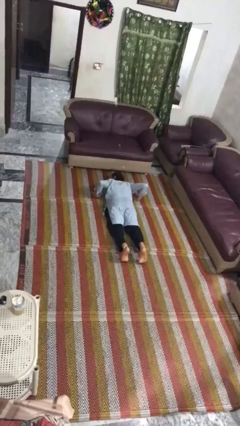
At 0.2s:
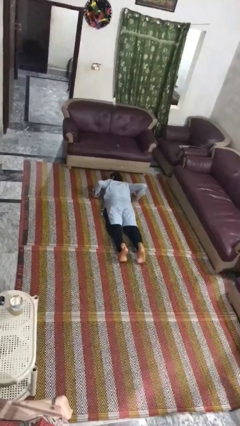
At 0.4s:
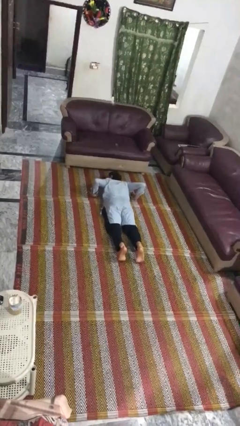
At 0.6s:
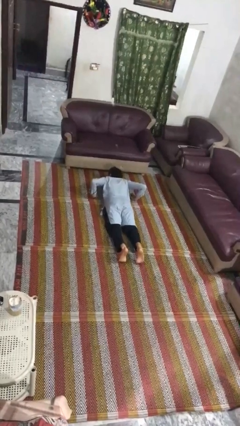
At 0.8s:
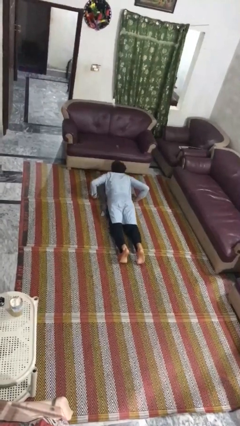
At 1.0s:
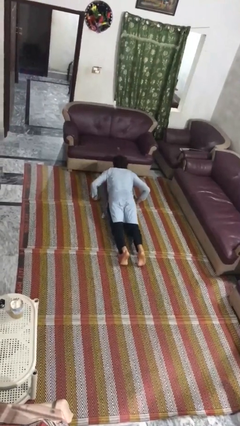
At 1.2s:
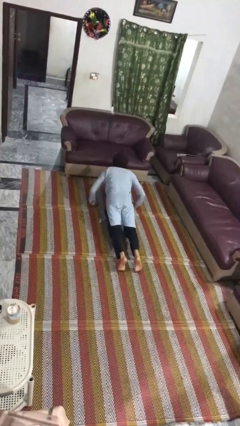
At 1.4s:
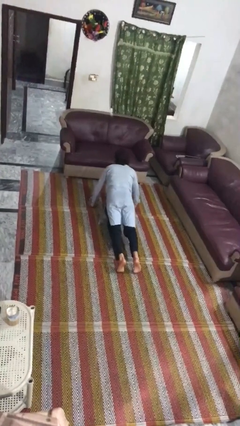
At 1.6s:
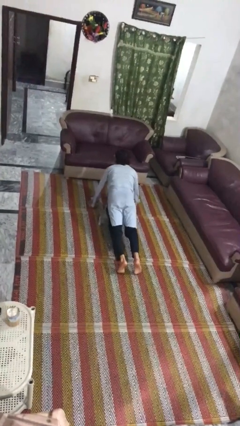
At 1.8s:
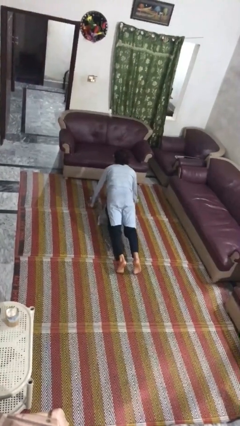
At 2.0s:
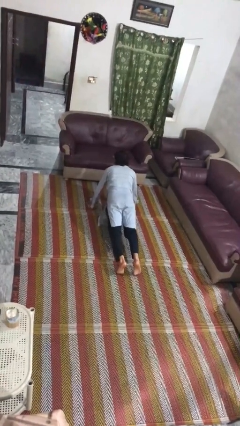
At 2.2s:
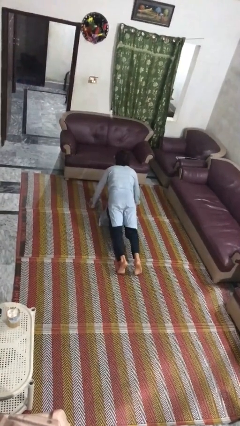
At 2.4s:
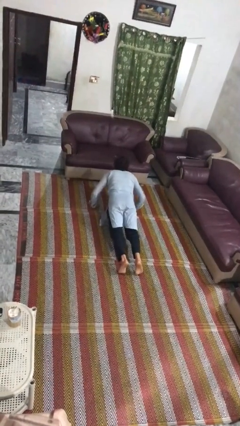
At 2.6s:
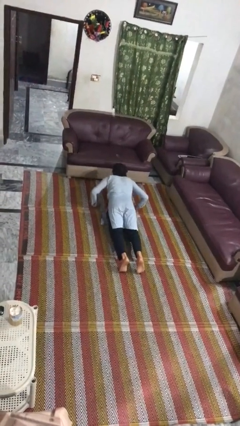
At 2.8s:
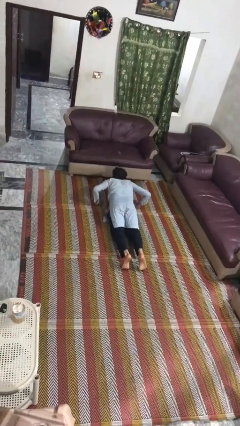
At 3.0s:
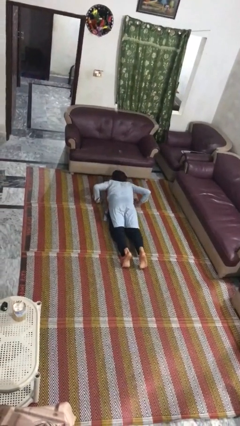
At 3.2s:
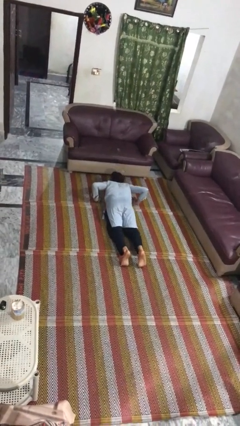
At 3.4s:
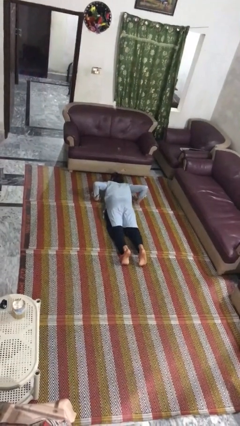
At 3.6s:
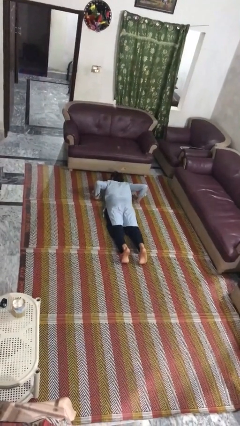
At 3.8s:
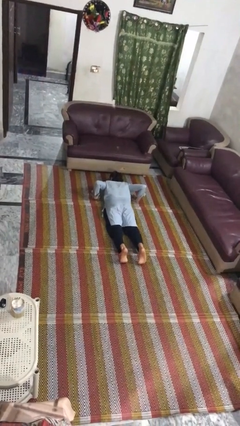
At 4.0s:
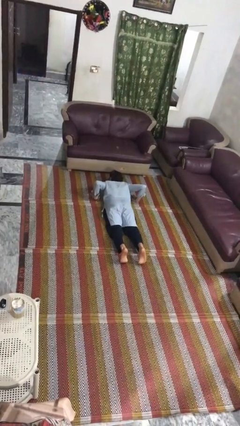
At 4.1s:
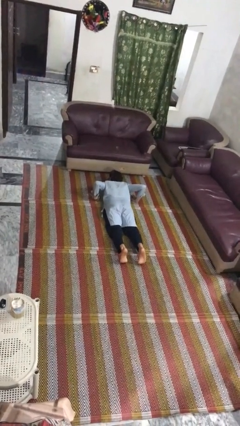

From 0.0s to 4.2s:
person exercises with pushup

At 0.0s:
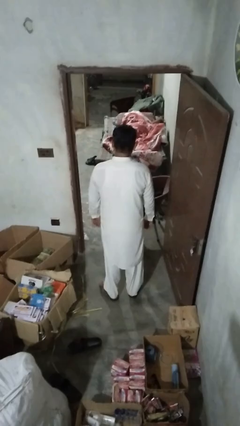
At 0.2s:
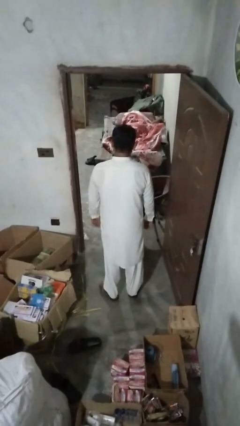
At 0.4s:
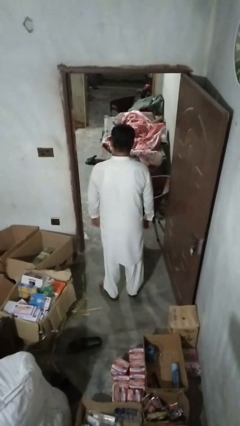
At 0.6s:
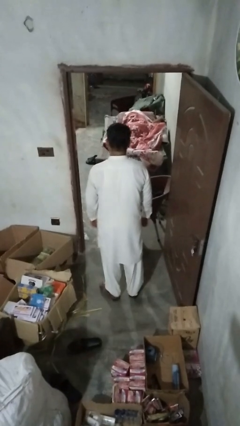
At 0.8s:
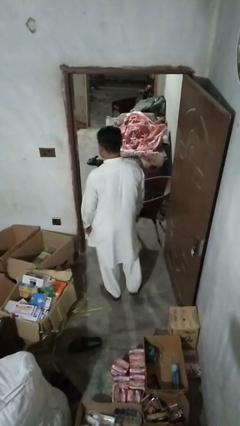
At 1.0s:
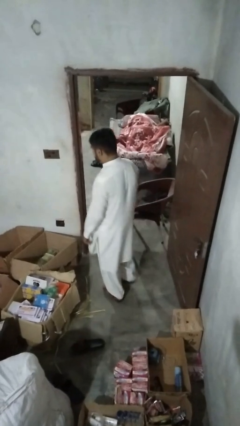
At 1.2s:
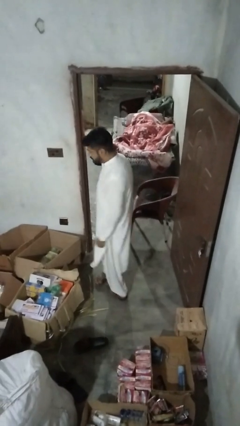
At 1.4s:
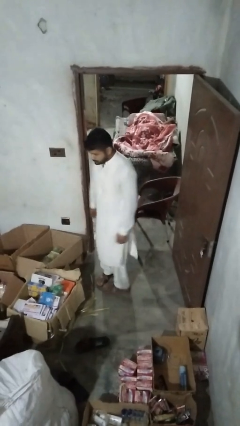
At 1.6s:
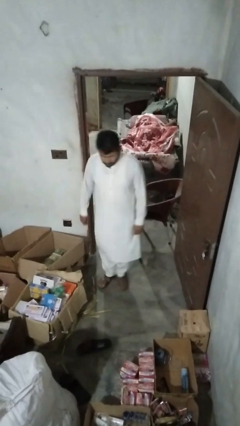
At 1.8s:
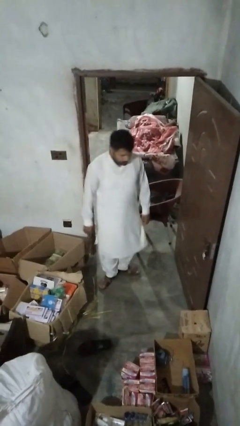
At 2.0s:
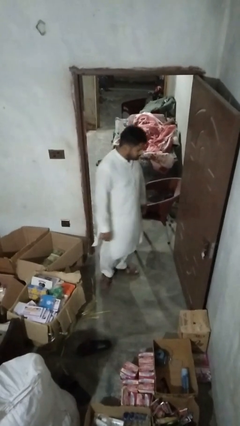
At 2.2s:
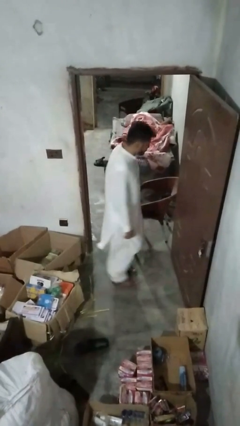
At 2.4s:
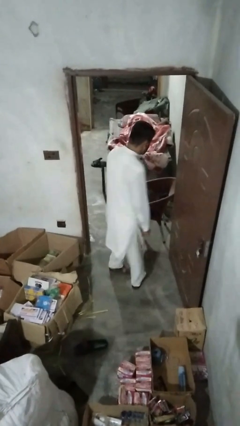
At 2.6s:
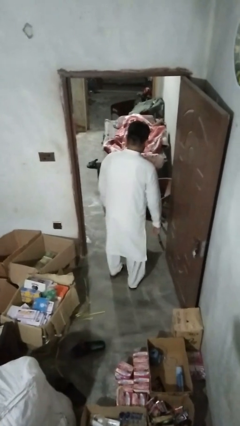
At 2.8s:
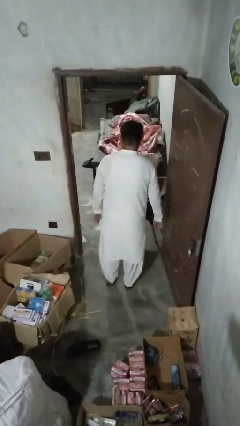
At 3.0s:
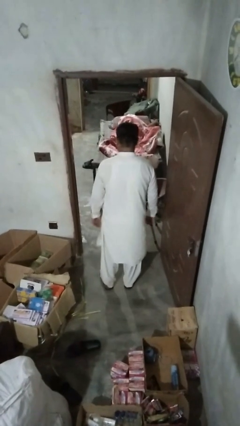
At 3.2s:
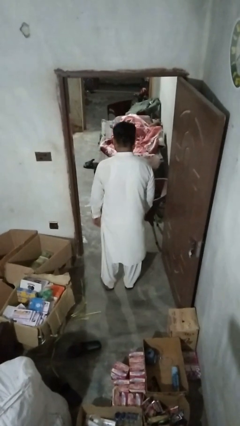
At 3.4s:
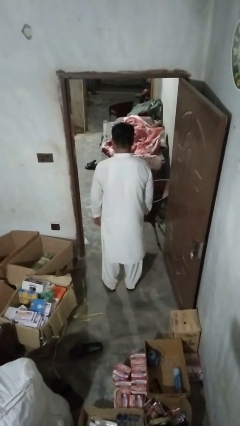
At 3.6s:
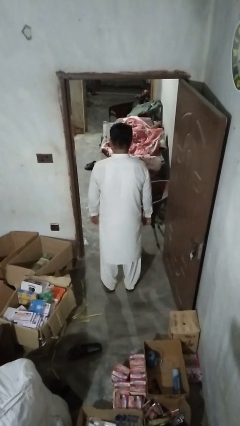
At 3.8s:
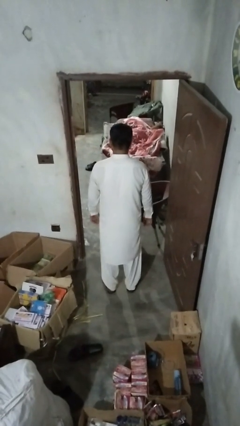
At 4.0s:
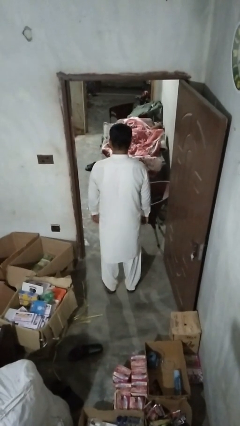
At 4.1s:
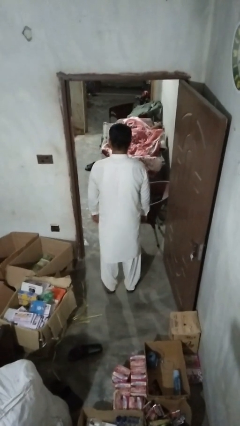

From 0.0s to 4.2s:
person twirls

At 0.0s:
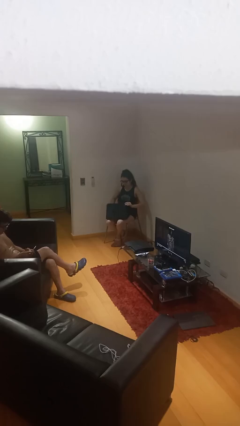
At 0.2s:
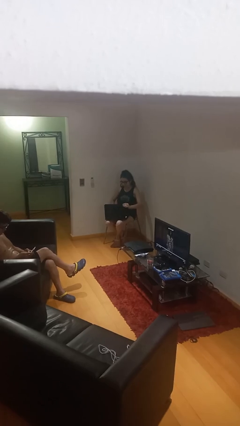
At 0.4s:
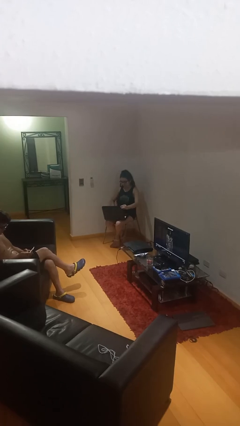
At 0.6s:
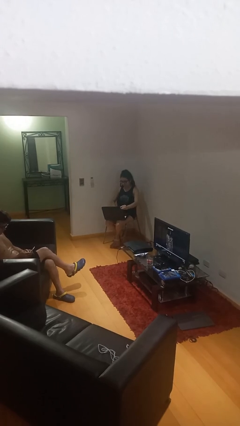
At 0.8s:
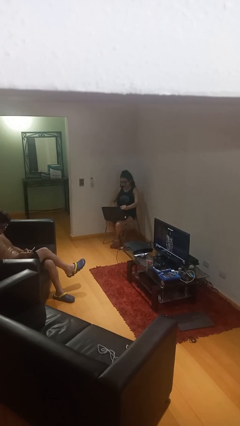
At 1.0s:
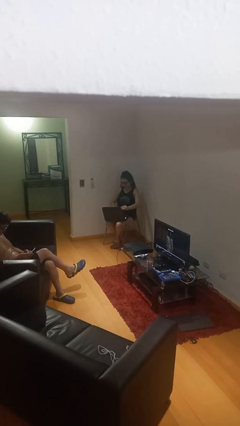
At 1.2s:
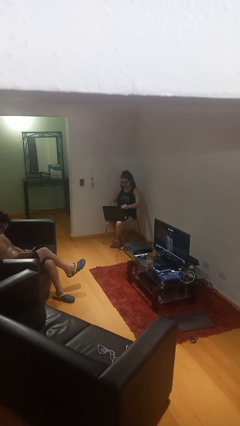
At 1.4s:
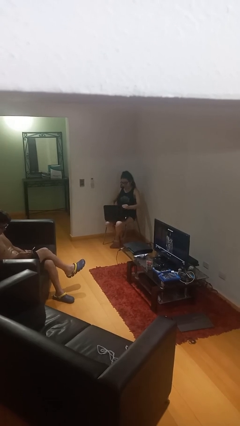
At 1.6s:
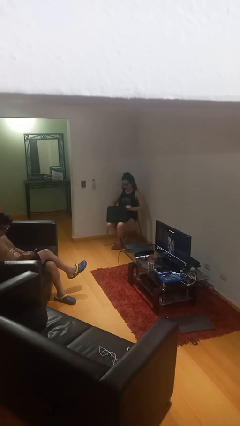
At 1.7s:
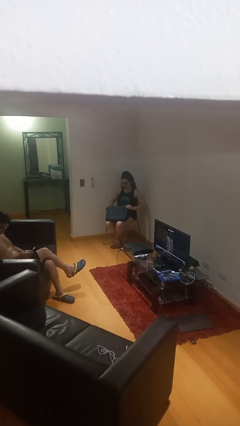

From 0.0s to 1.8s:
person interacts with laptop

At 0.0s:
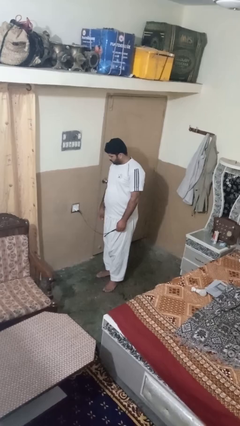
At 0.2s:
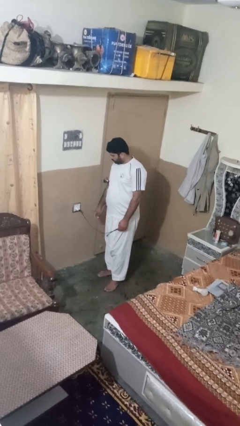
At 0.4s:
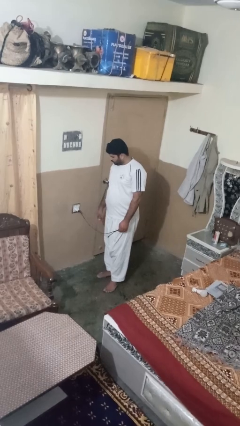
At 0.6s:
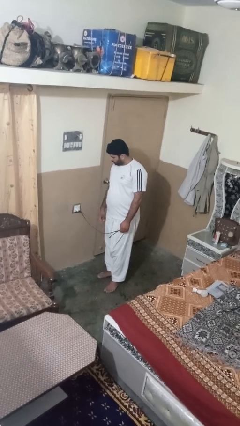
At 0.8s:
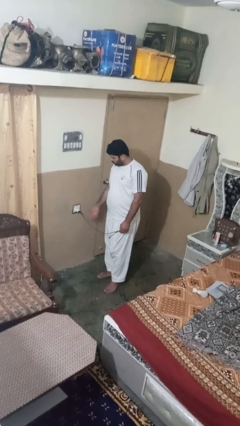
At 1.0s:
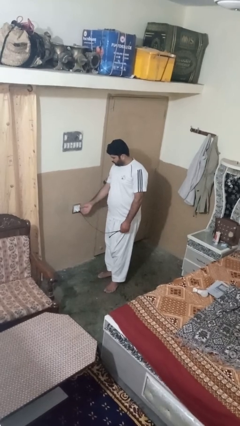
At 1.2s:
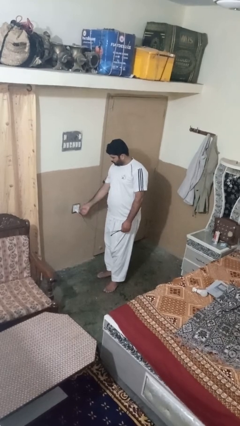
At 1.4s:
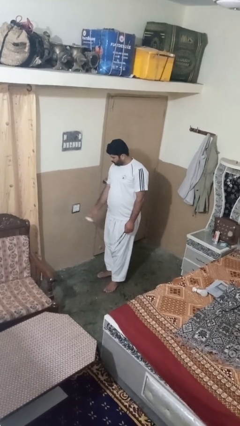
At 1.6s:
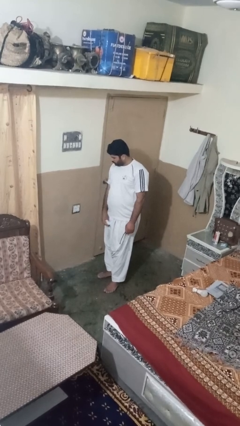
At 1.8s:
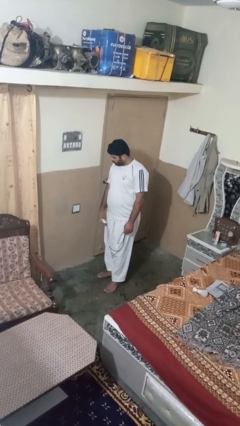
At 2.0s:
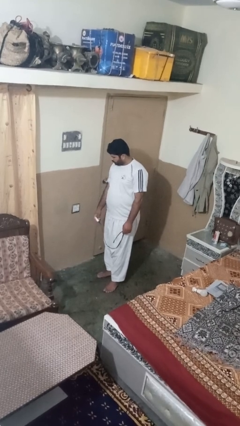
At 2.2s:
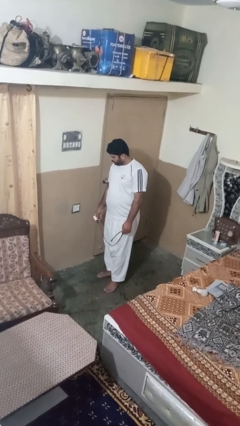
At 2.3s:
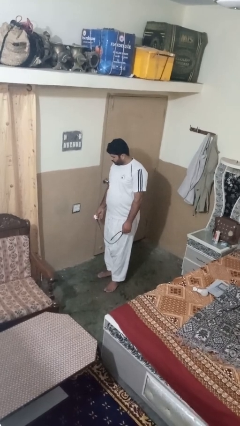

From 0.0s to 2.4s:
person unplugs from electrical socket

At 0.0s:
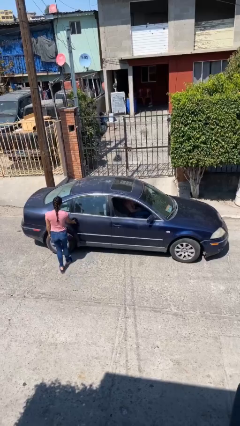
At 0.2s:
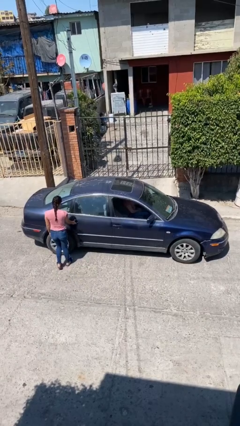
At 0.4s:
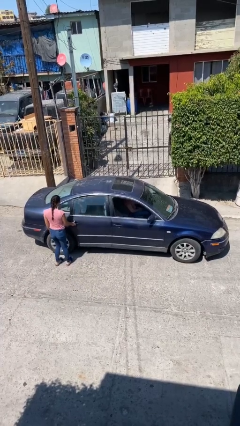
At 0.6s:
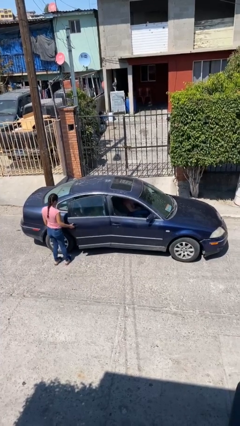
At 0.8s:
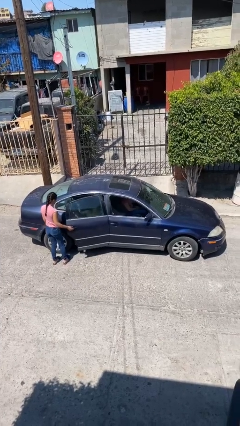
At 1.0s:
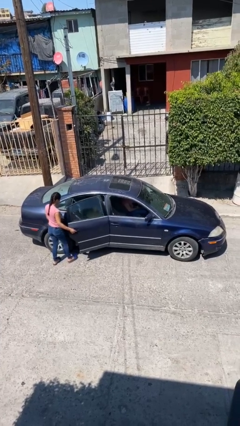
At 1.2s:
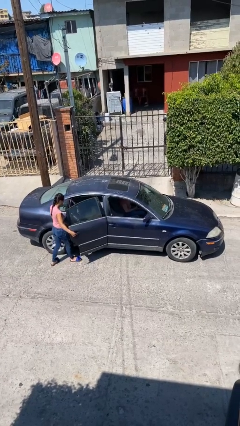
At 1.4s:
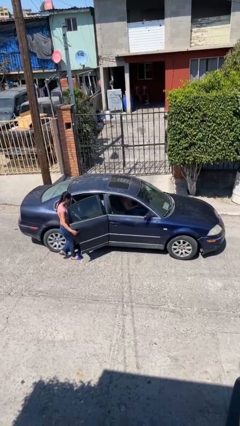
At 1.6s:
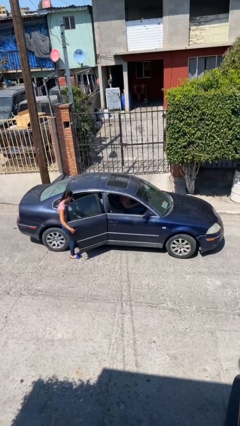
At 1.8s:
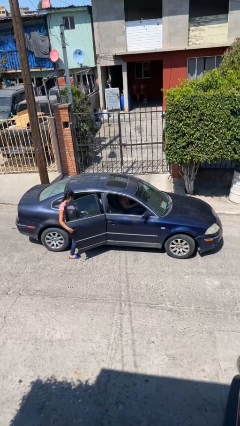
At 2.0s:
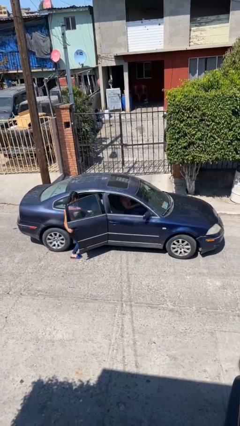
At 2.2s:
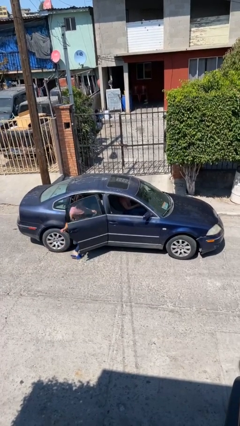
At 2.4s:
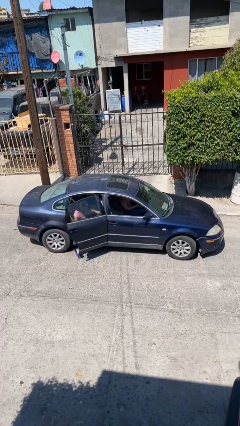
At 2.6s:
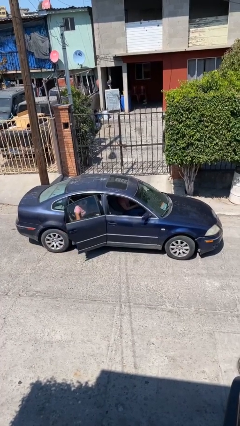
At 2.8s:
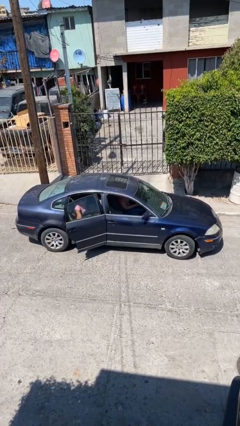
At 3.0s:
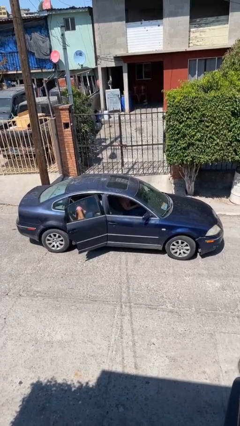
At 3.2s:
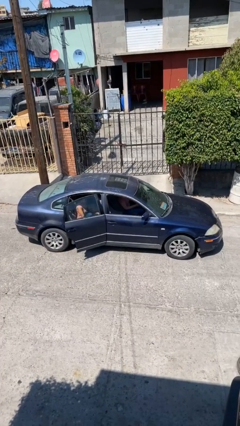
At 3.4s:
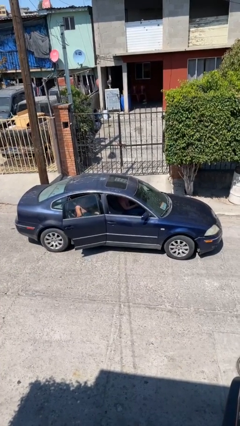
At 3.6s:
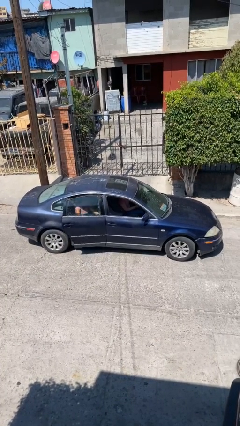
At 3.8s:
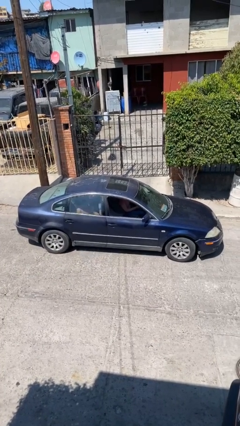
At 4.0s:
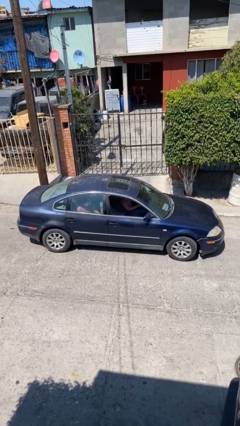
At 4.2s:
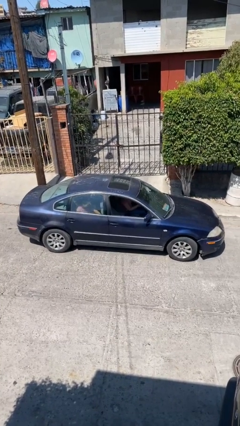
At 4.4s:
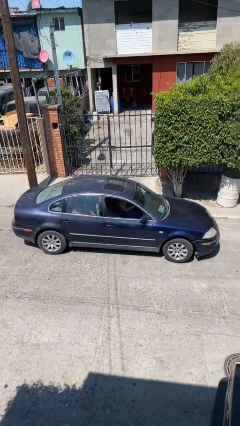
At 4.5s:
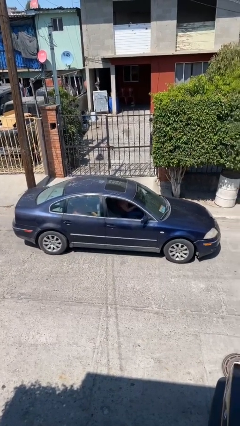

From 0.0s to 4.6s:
car picks up person

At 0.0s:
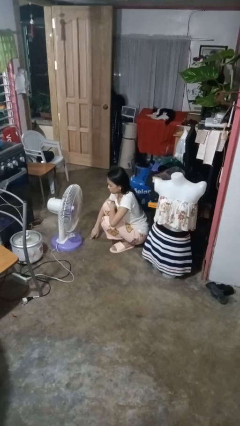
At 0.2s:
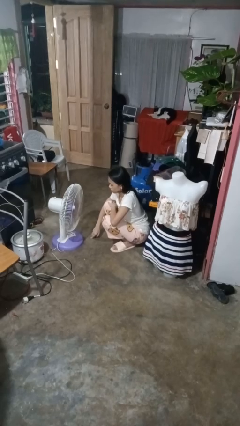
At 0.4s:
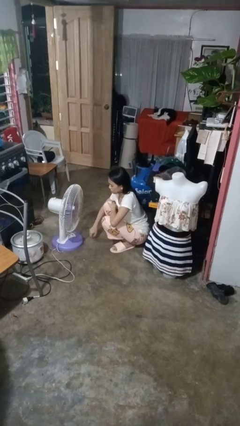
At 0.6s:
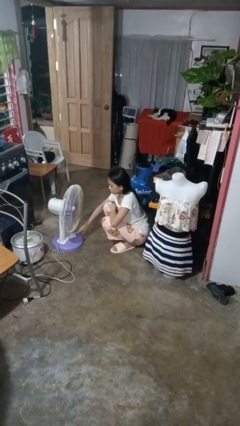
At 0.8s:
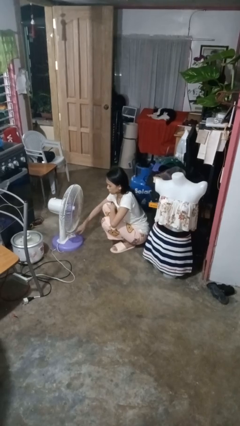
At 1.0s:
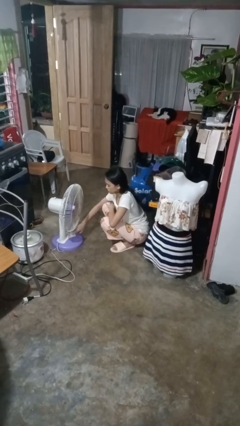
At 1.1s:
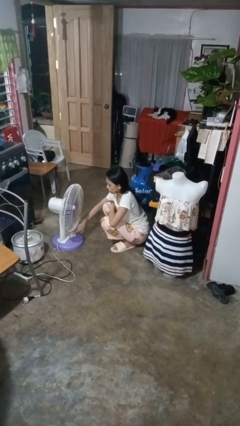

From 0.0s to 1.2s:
person turns off fan
